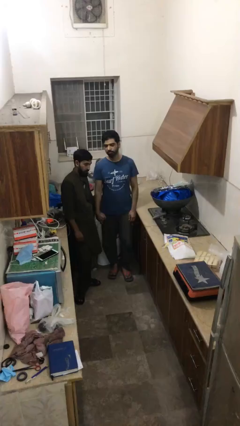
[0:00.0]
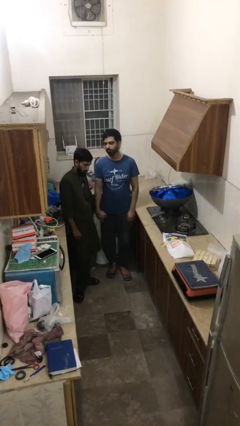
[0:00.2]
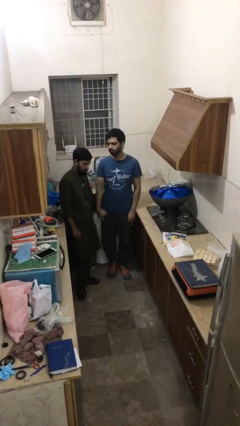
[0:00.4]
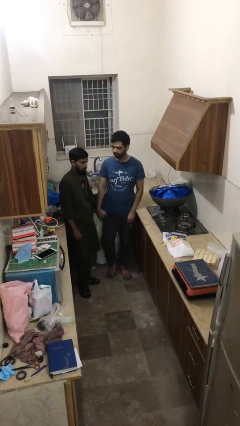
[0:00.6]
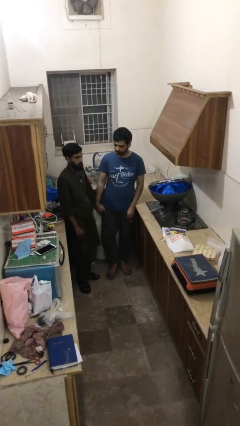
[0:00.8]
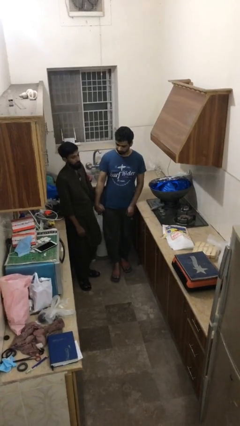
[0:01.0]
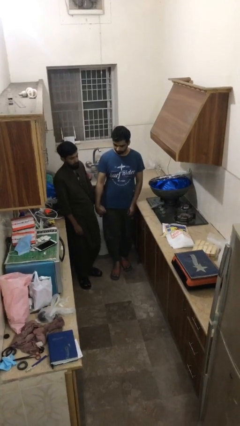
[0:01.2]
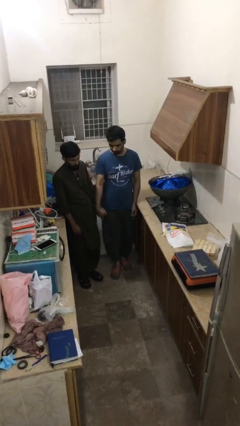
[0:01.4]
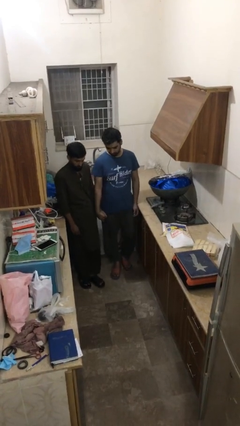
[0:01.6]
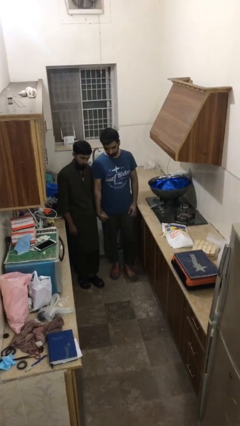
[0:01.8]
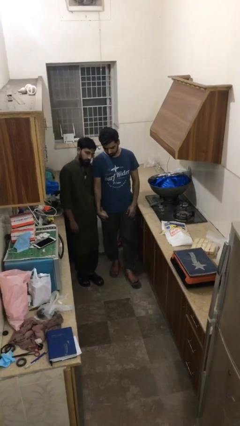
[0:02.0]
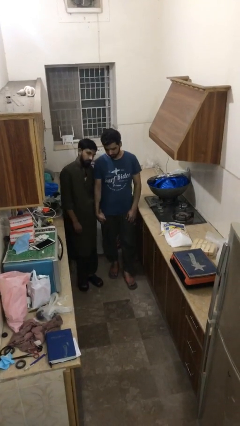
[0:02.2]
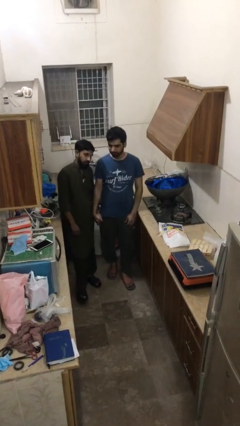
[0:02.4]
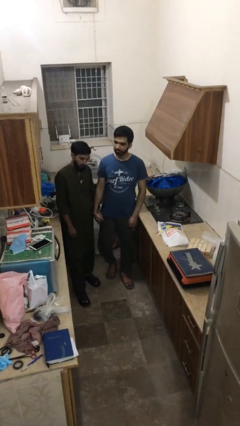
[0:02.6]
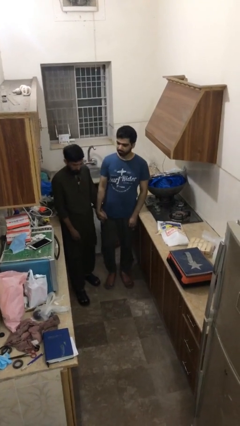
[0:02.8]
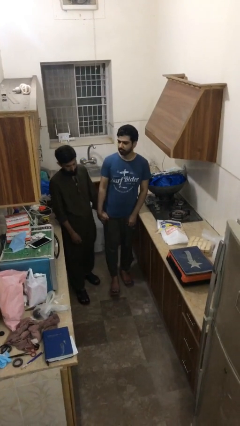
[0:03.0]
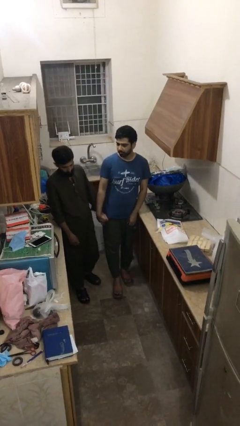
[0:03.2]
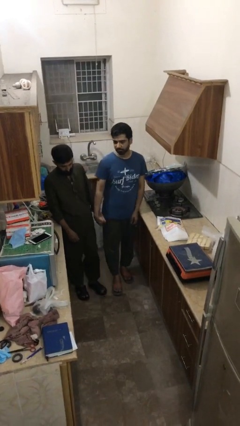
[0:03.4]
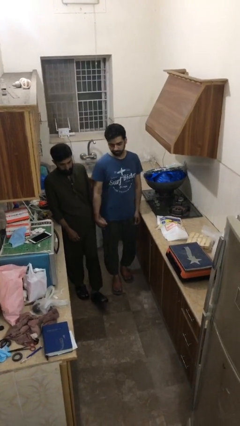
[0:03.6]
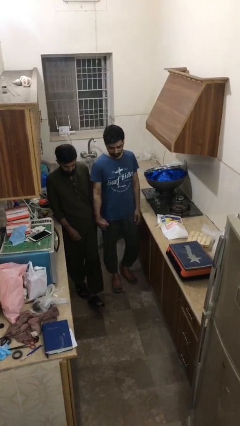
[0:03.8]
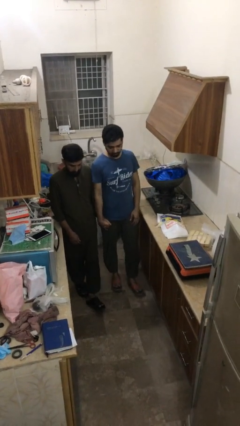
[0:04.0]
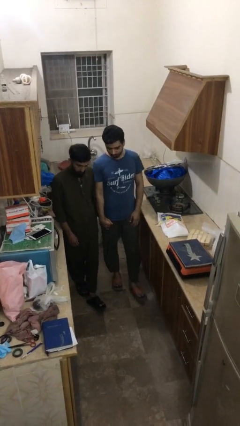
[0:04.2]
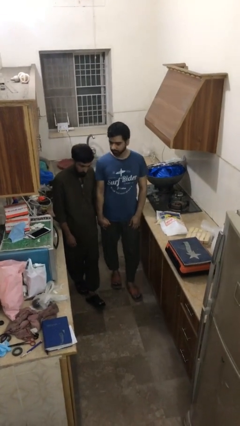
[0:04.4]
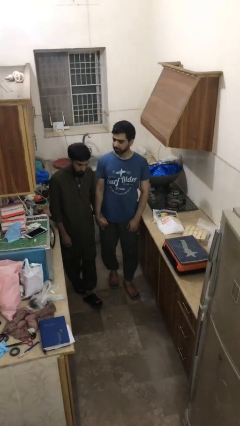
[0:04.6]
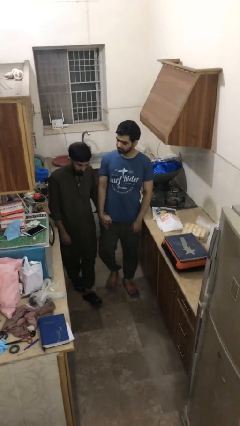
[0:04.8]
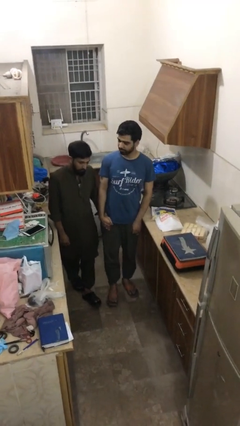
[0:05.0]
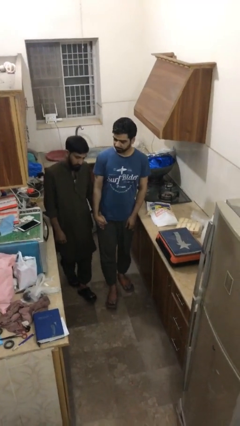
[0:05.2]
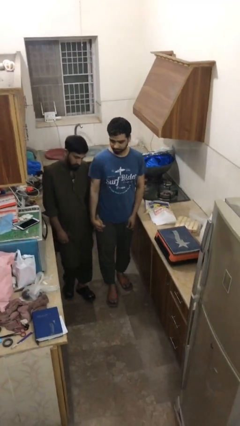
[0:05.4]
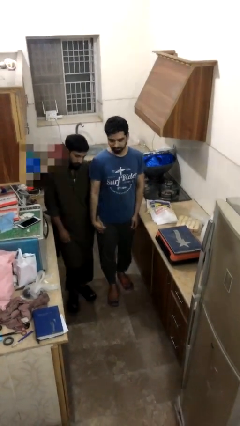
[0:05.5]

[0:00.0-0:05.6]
person holds hand

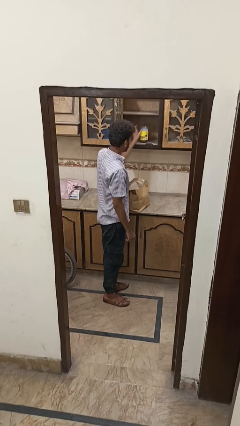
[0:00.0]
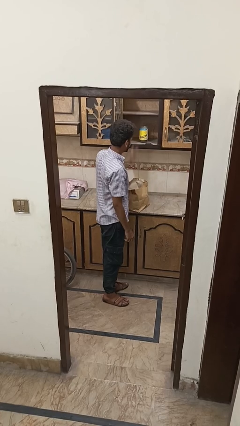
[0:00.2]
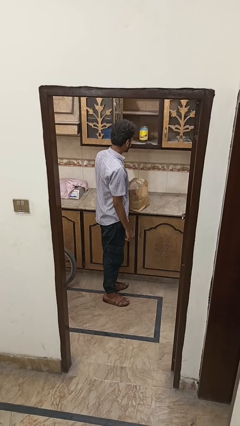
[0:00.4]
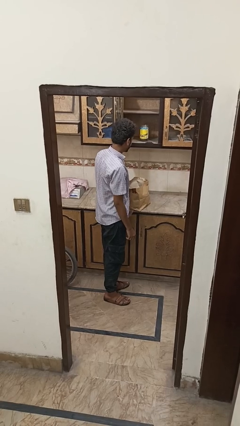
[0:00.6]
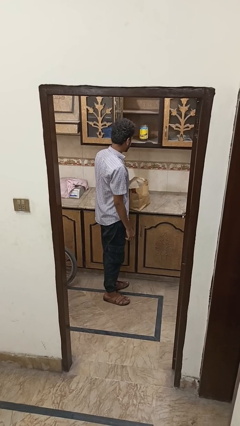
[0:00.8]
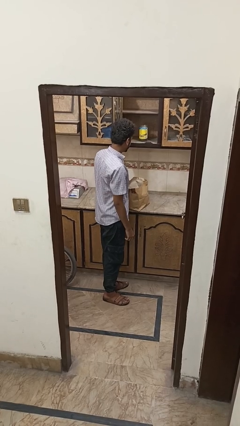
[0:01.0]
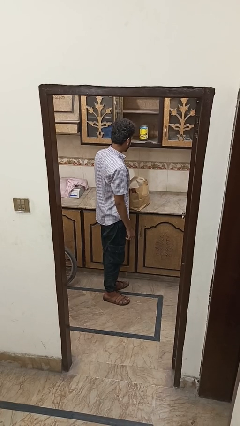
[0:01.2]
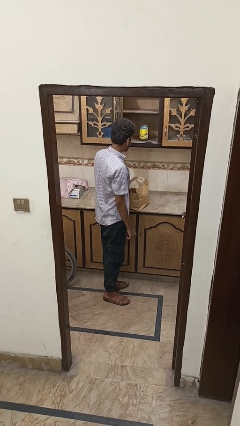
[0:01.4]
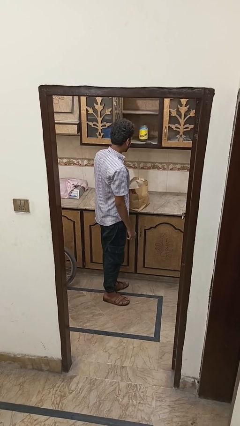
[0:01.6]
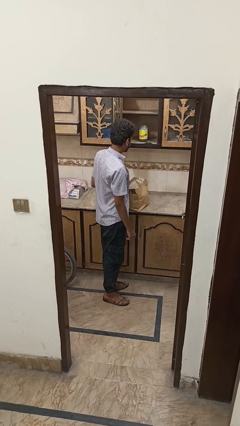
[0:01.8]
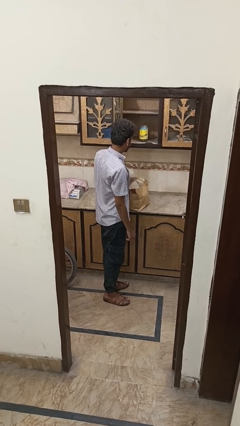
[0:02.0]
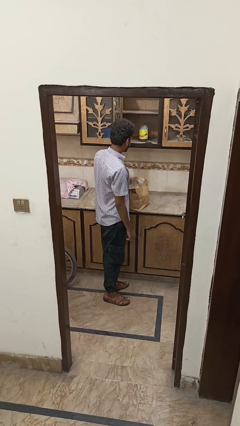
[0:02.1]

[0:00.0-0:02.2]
person uncovers with bedsheets

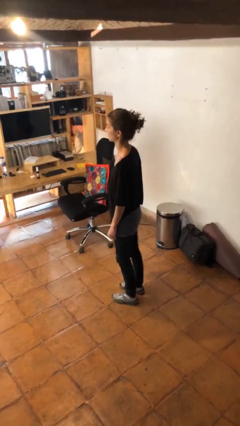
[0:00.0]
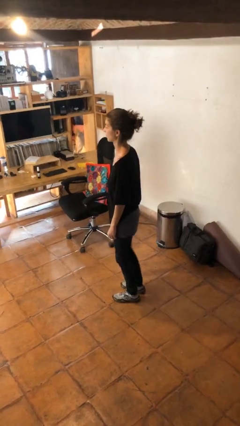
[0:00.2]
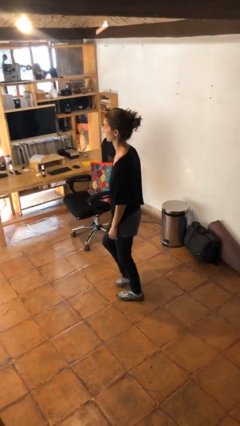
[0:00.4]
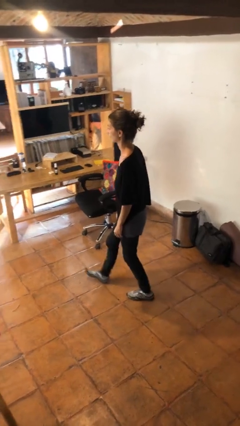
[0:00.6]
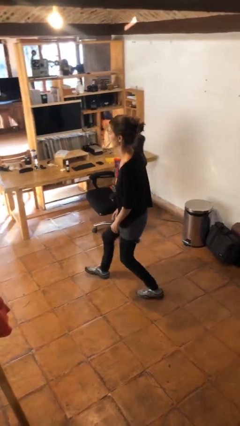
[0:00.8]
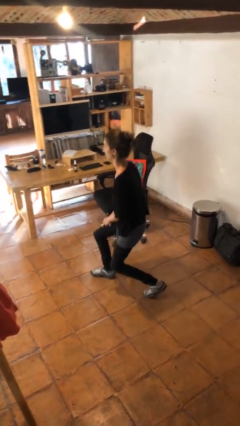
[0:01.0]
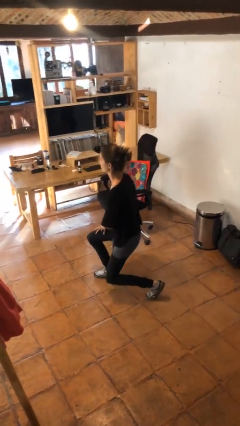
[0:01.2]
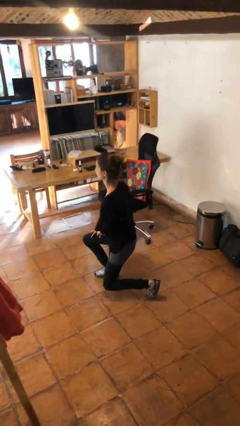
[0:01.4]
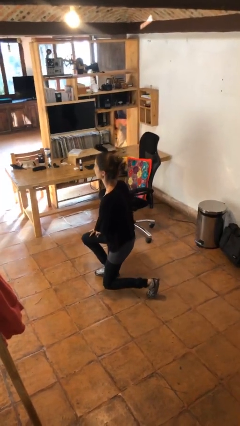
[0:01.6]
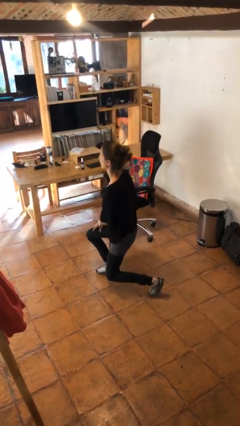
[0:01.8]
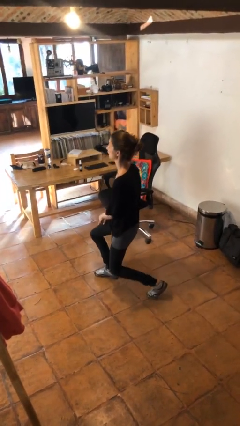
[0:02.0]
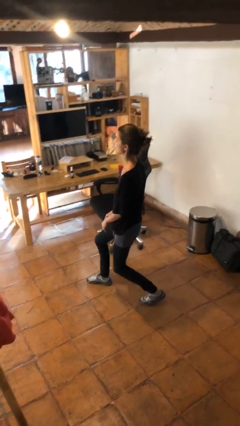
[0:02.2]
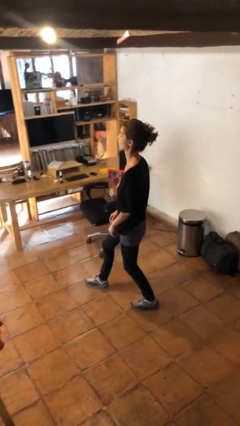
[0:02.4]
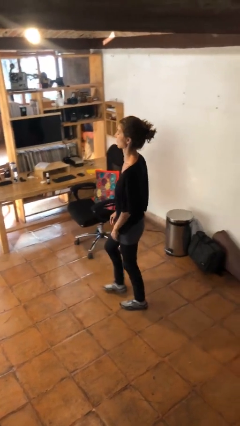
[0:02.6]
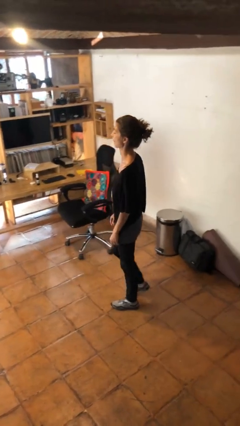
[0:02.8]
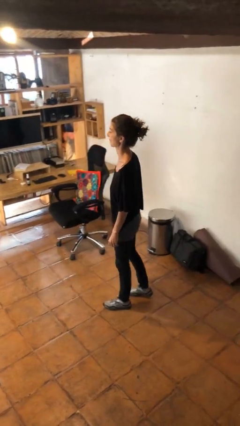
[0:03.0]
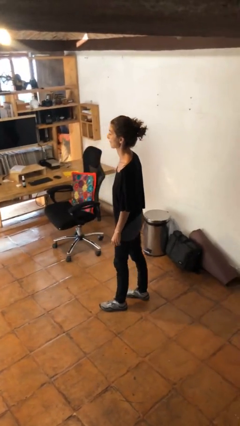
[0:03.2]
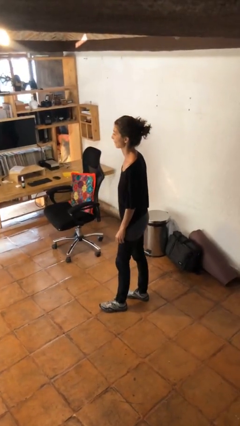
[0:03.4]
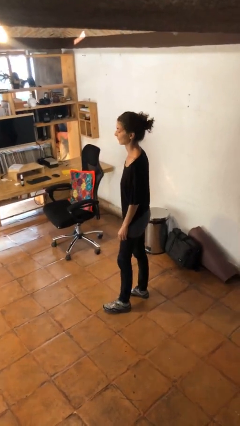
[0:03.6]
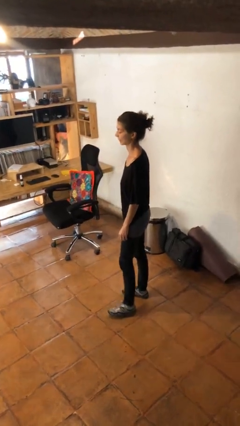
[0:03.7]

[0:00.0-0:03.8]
person exercises with lunges

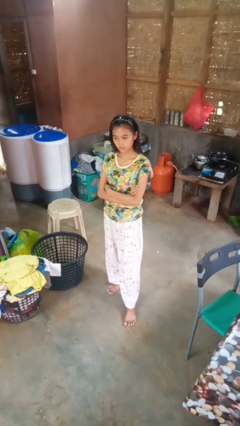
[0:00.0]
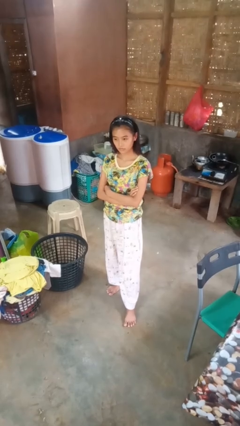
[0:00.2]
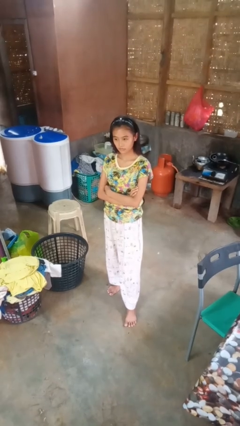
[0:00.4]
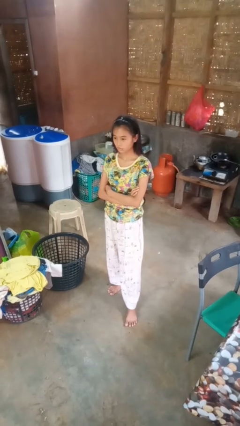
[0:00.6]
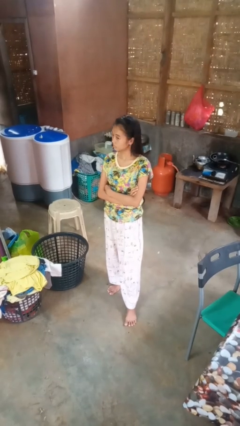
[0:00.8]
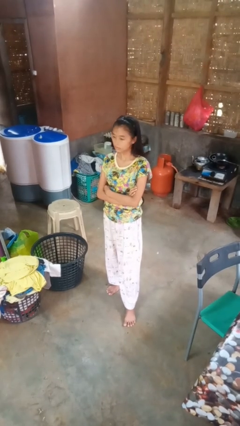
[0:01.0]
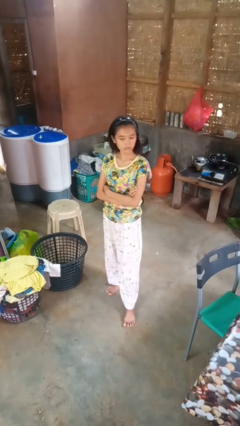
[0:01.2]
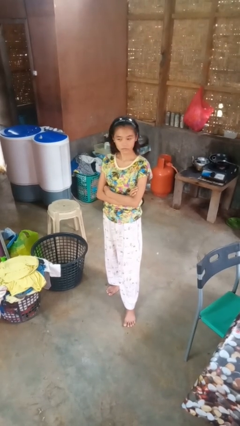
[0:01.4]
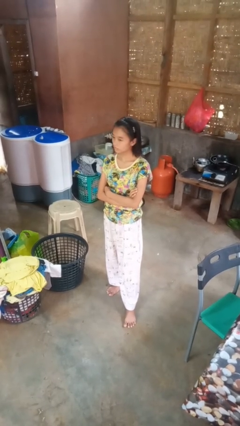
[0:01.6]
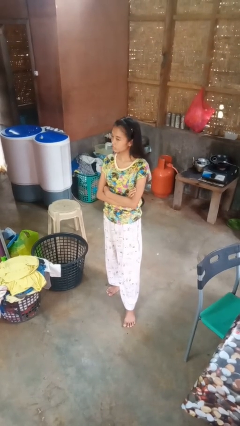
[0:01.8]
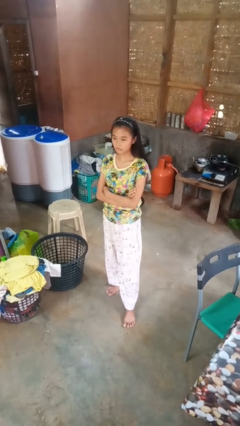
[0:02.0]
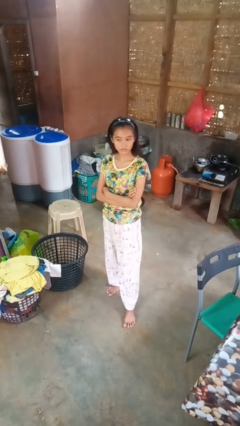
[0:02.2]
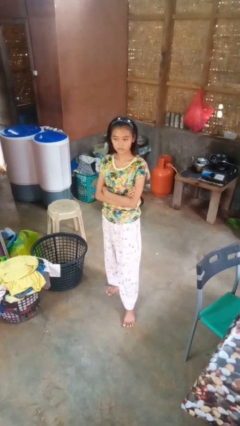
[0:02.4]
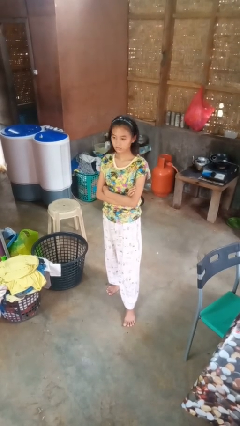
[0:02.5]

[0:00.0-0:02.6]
person shakes head

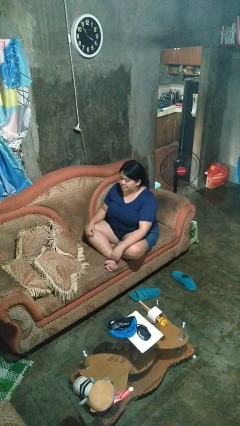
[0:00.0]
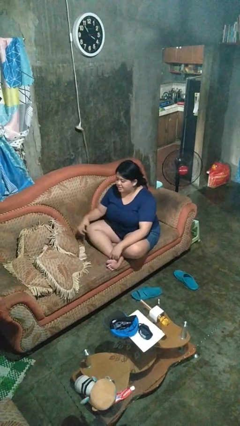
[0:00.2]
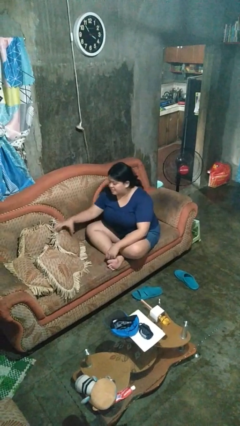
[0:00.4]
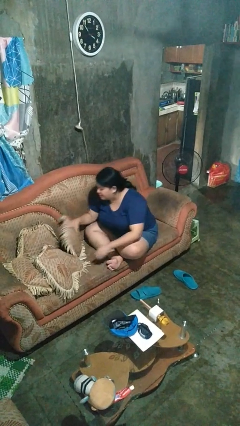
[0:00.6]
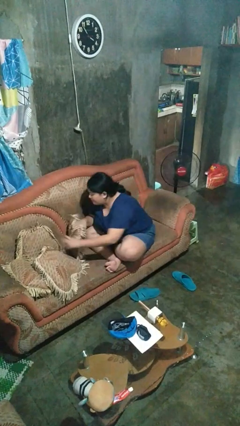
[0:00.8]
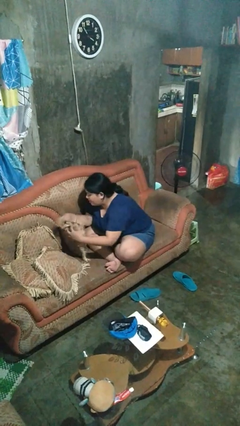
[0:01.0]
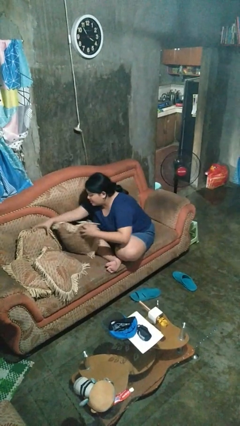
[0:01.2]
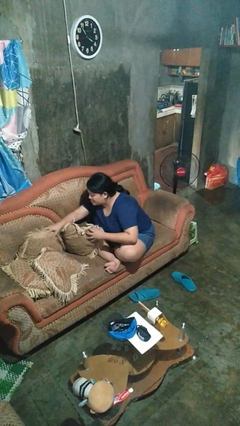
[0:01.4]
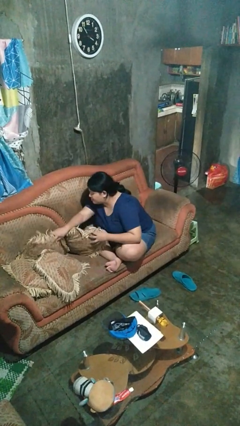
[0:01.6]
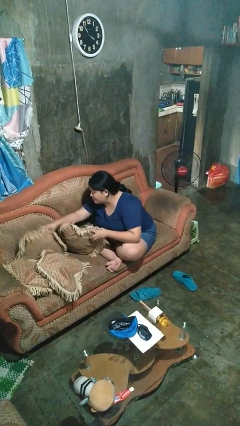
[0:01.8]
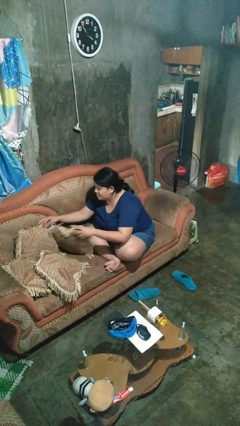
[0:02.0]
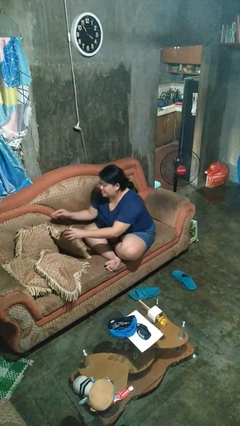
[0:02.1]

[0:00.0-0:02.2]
person searches in couch

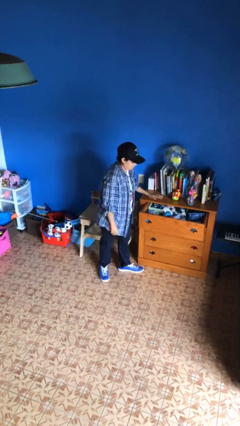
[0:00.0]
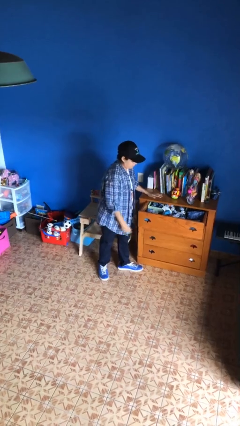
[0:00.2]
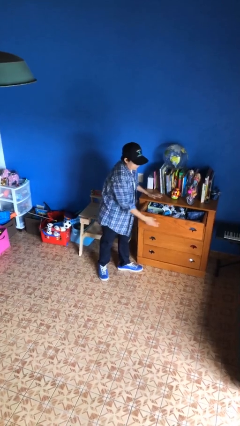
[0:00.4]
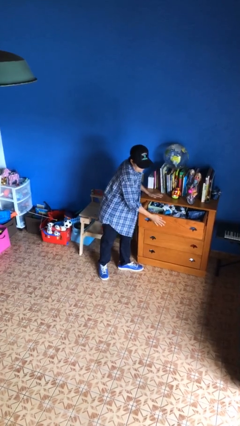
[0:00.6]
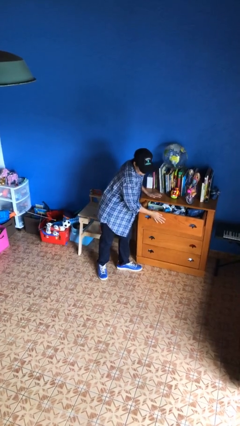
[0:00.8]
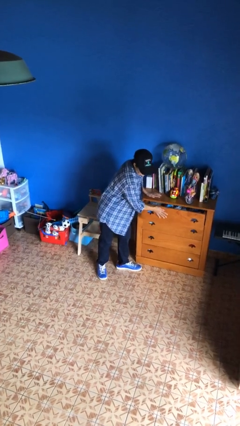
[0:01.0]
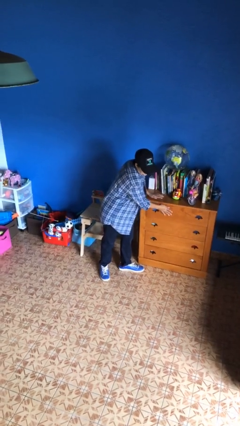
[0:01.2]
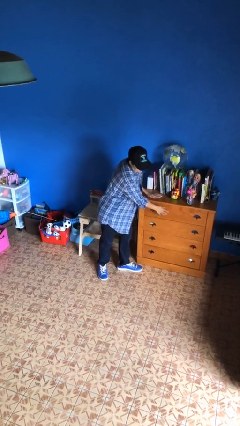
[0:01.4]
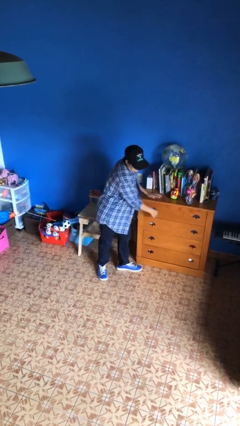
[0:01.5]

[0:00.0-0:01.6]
person closes dresser drawer
